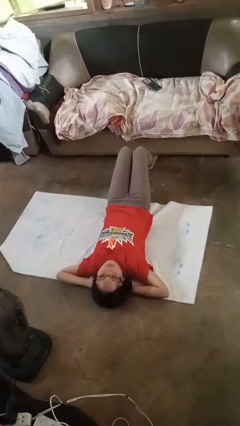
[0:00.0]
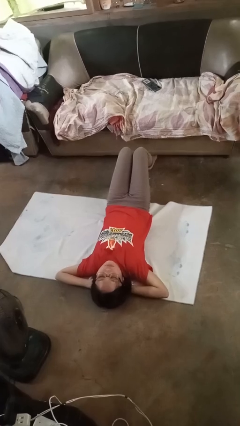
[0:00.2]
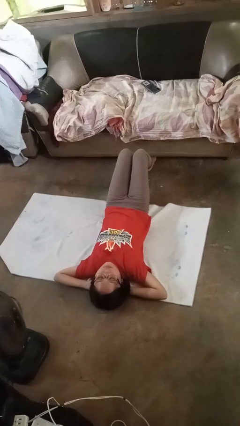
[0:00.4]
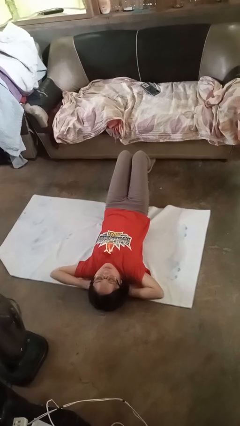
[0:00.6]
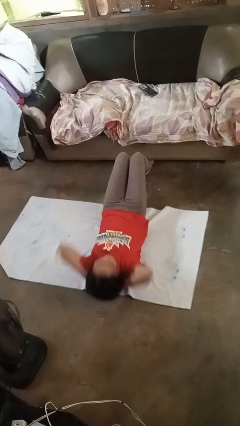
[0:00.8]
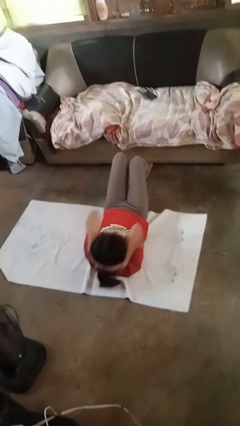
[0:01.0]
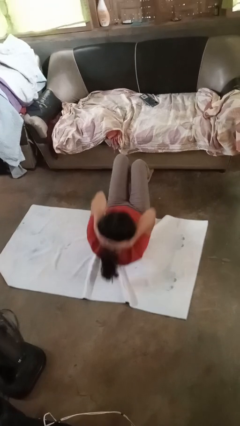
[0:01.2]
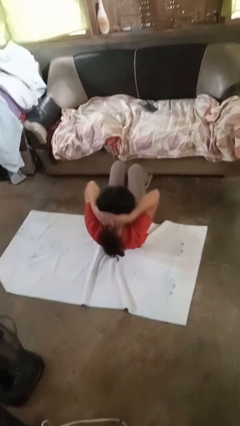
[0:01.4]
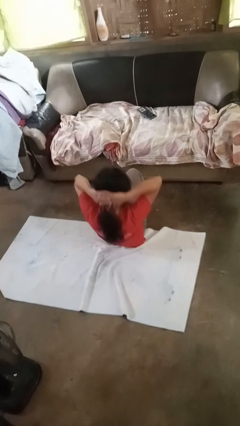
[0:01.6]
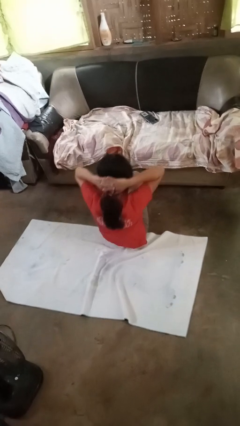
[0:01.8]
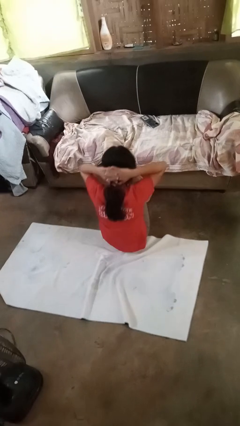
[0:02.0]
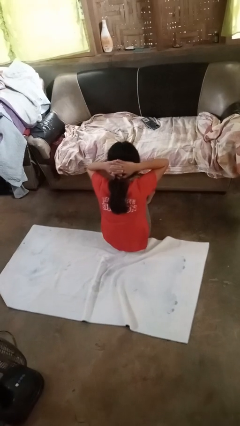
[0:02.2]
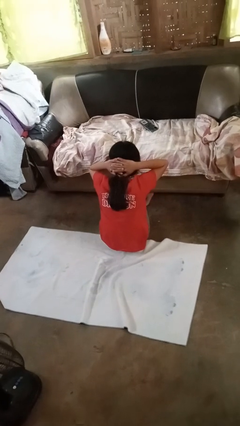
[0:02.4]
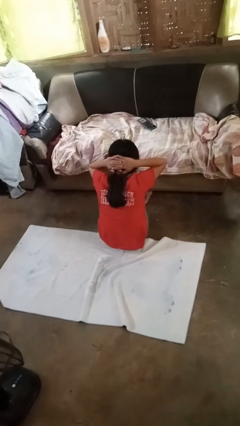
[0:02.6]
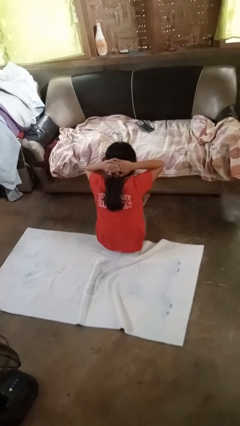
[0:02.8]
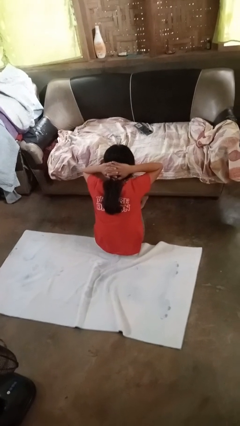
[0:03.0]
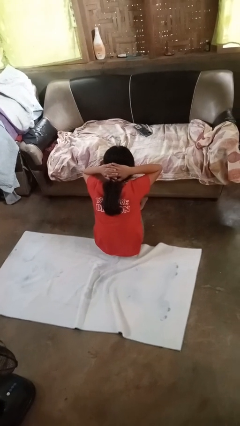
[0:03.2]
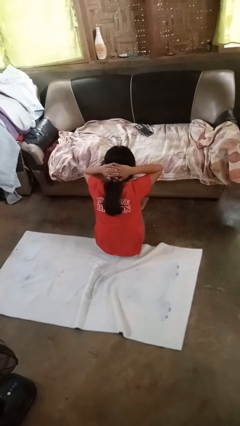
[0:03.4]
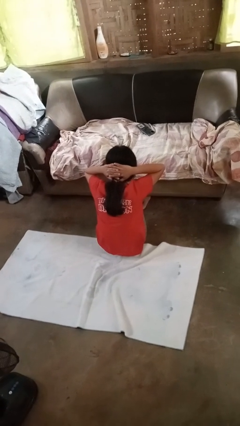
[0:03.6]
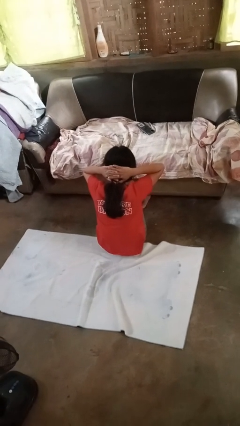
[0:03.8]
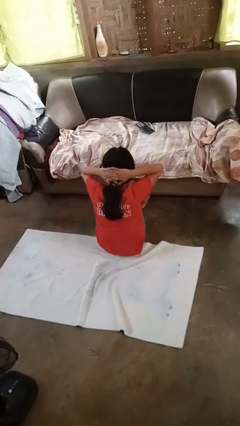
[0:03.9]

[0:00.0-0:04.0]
person exercises with situp

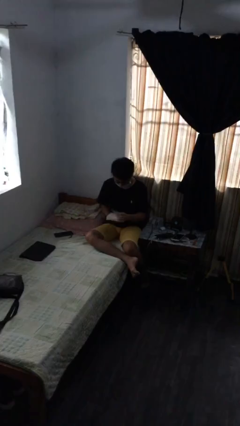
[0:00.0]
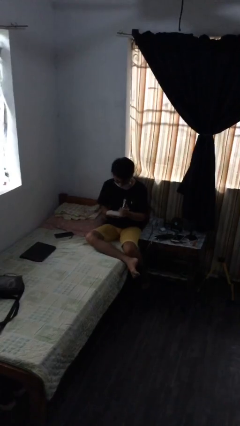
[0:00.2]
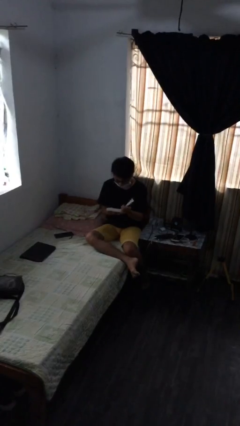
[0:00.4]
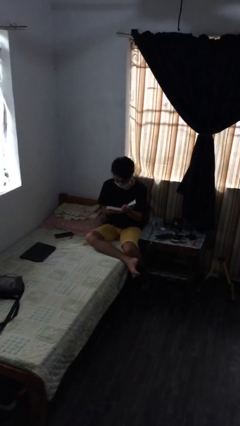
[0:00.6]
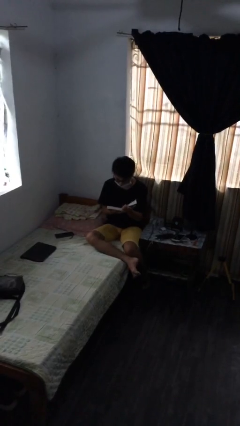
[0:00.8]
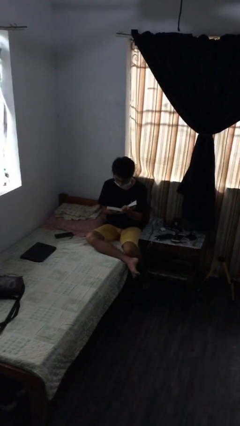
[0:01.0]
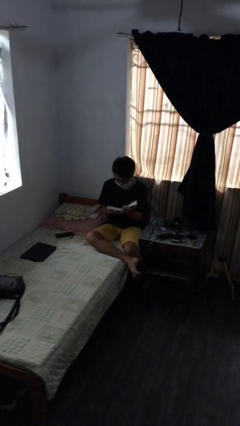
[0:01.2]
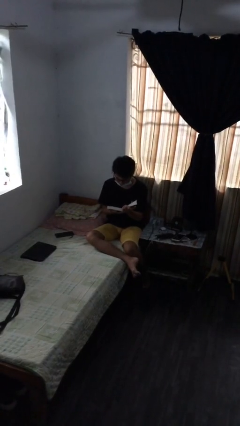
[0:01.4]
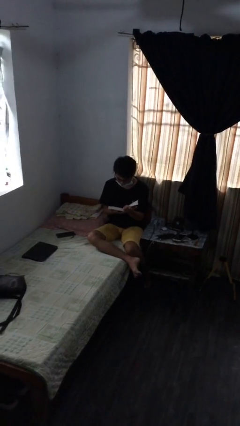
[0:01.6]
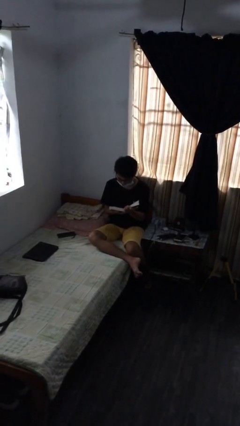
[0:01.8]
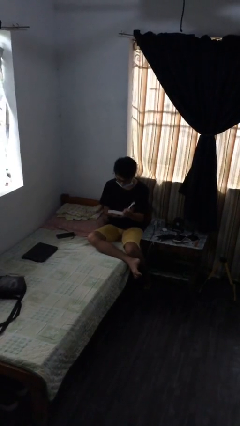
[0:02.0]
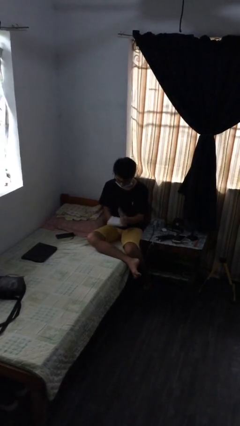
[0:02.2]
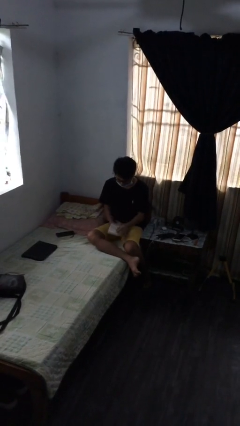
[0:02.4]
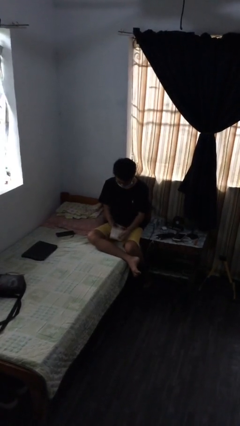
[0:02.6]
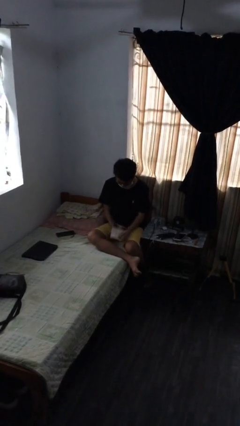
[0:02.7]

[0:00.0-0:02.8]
person reads document

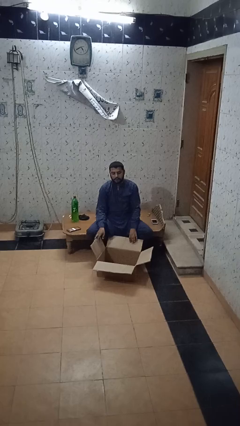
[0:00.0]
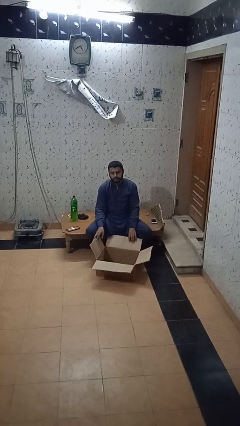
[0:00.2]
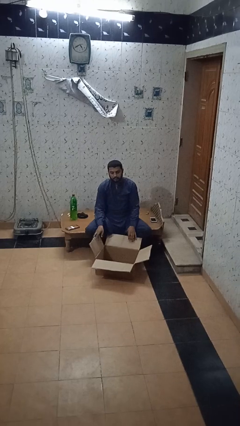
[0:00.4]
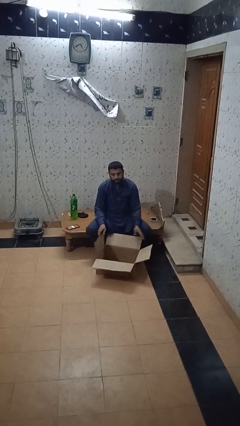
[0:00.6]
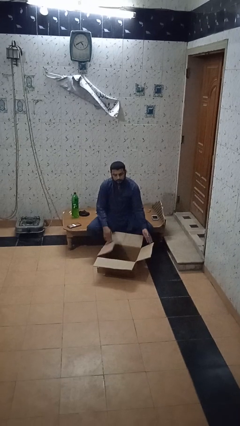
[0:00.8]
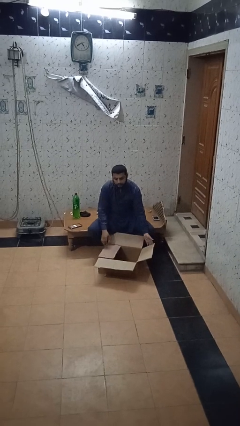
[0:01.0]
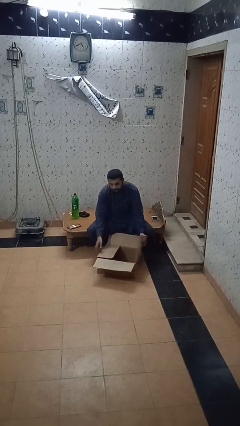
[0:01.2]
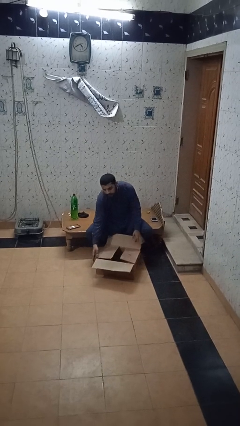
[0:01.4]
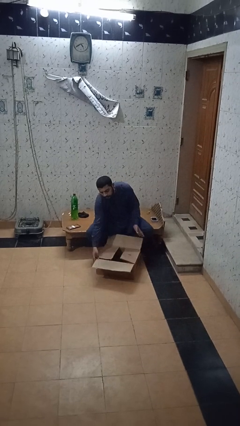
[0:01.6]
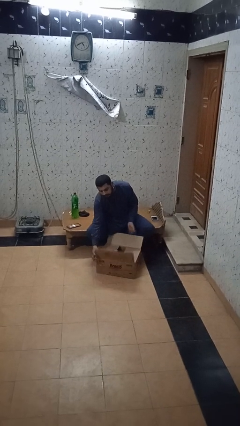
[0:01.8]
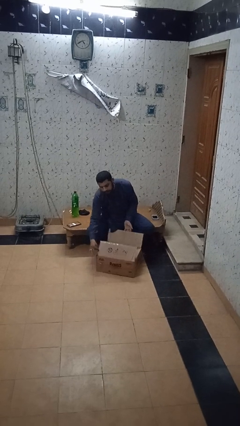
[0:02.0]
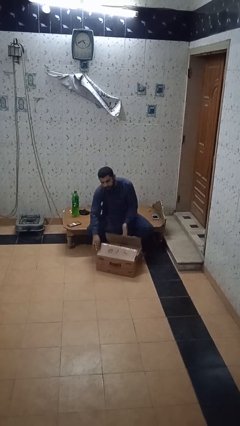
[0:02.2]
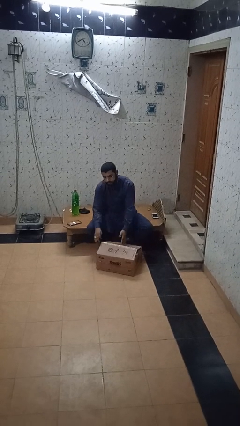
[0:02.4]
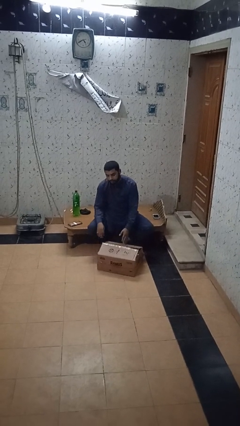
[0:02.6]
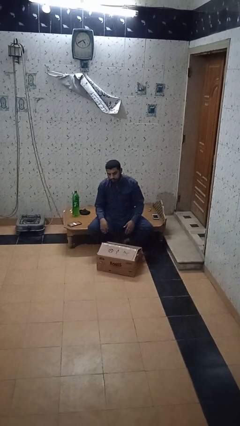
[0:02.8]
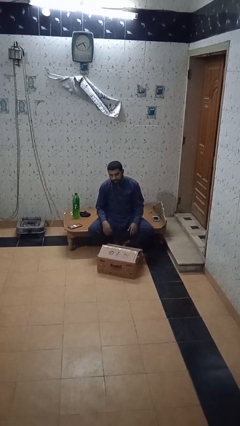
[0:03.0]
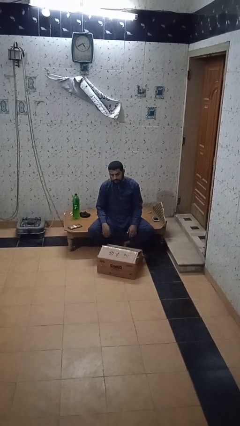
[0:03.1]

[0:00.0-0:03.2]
person closes box

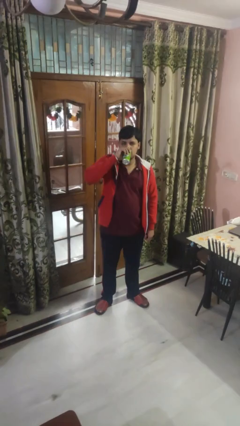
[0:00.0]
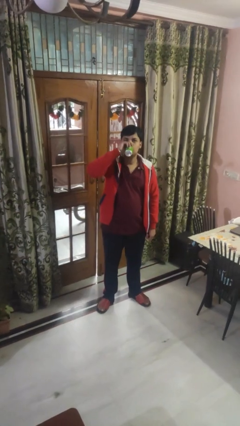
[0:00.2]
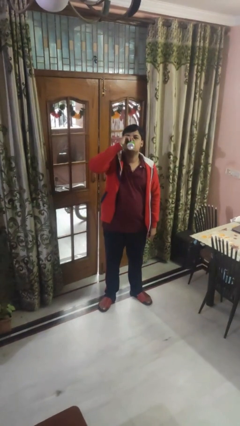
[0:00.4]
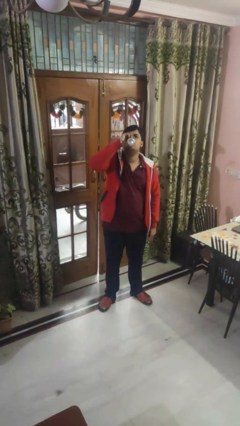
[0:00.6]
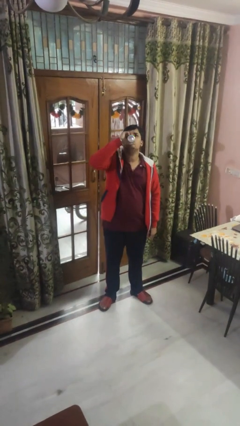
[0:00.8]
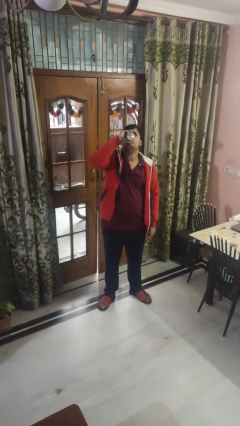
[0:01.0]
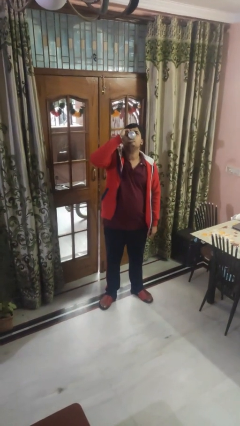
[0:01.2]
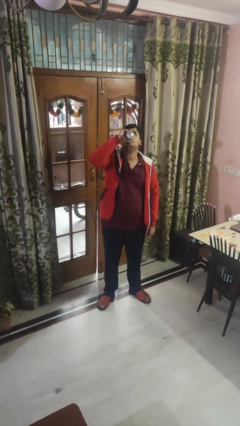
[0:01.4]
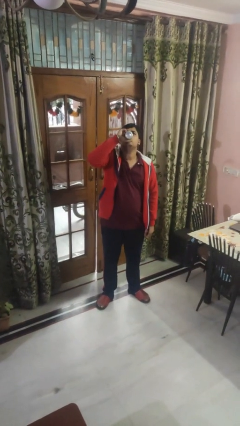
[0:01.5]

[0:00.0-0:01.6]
person drinks from beverage can

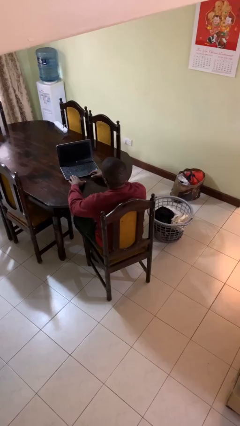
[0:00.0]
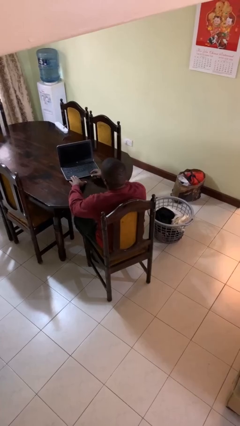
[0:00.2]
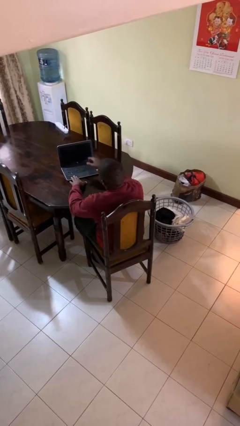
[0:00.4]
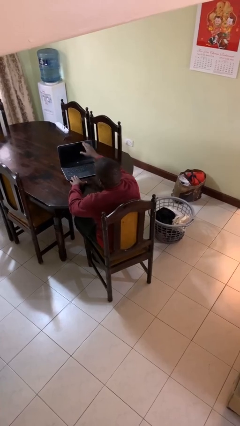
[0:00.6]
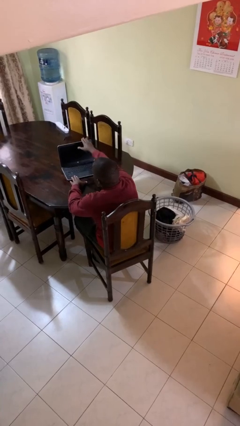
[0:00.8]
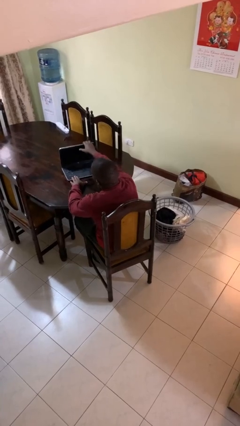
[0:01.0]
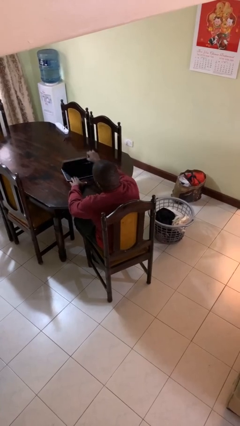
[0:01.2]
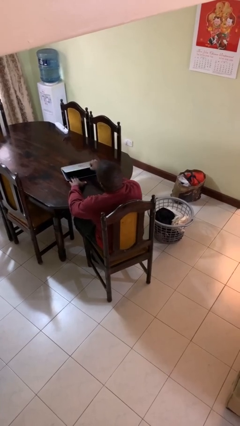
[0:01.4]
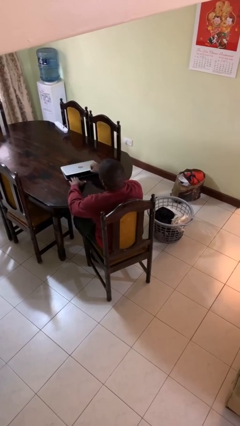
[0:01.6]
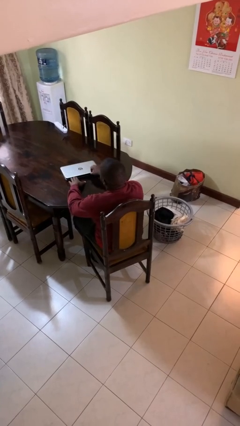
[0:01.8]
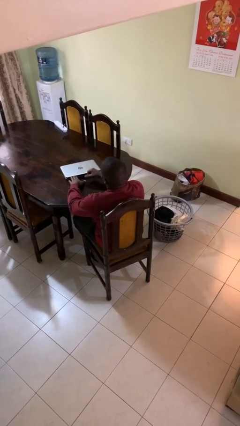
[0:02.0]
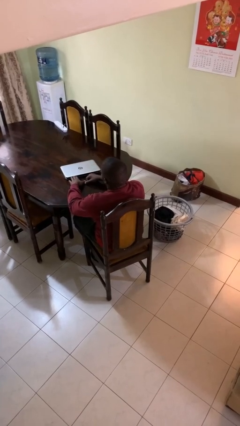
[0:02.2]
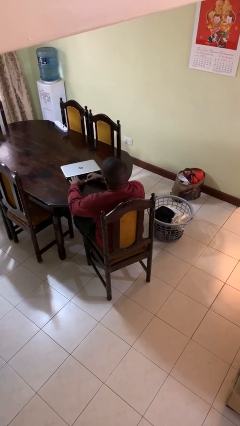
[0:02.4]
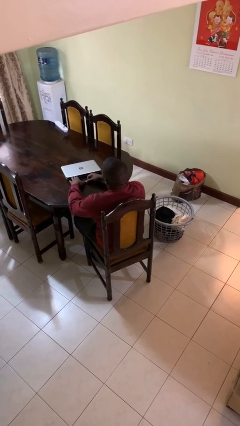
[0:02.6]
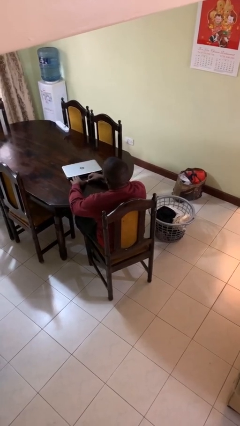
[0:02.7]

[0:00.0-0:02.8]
person closes laptop

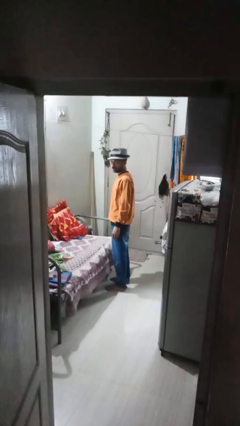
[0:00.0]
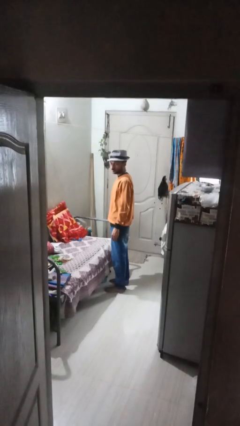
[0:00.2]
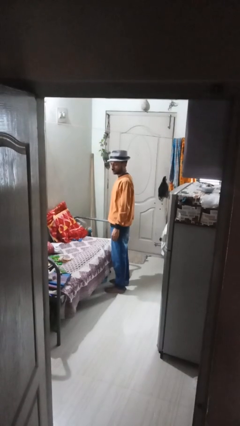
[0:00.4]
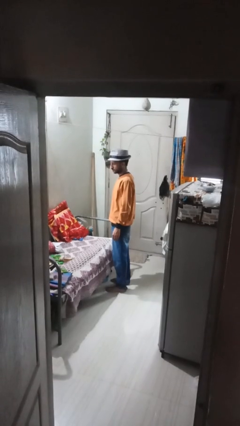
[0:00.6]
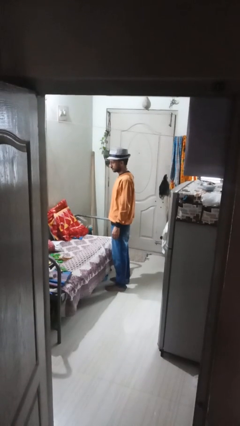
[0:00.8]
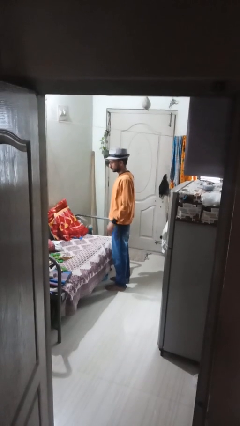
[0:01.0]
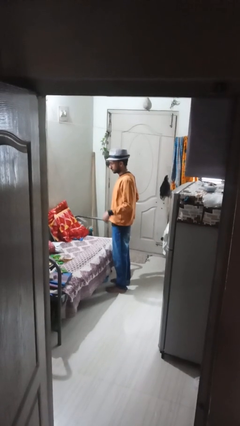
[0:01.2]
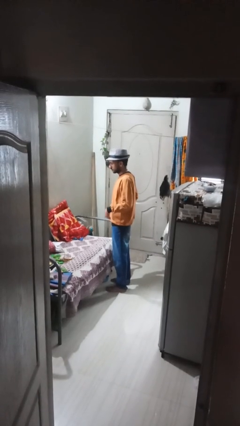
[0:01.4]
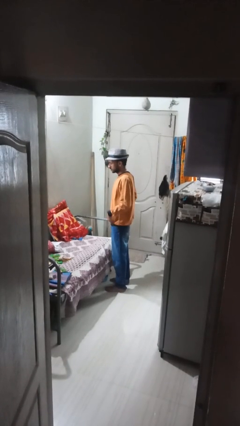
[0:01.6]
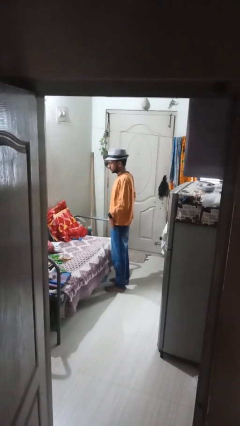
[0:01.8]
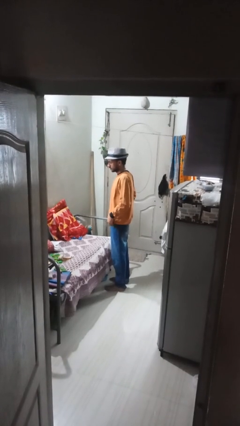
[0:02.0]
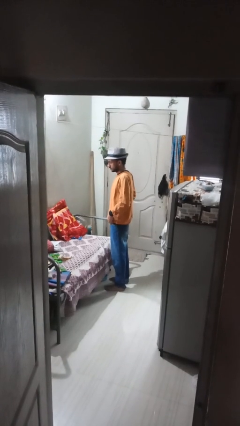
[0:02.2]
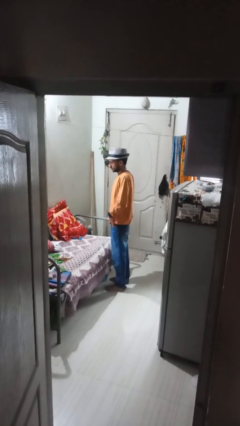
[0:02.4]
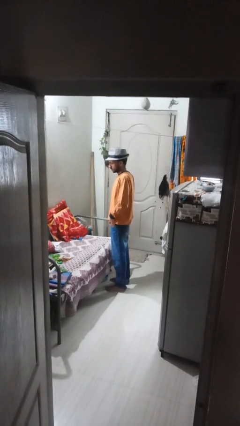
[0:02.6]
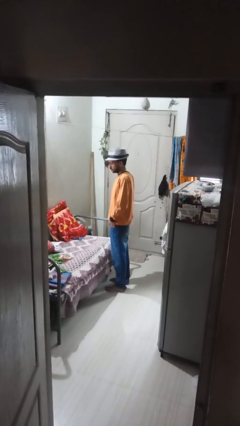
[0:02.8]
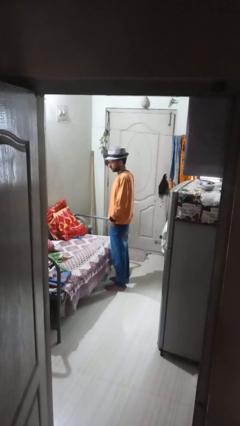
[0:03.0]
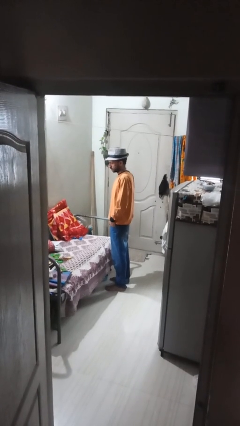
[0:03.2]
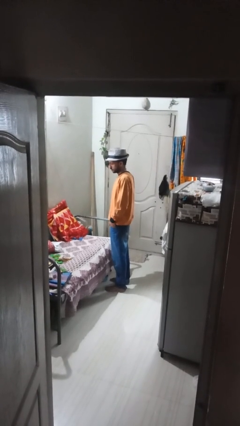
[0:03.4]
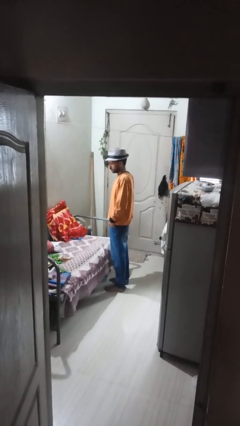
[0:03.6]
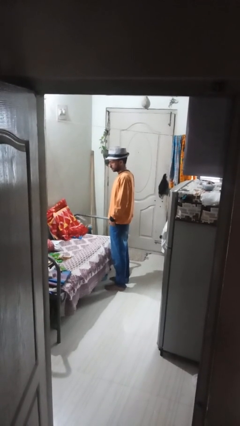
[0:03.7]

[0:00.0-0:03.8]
person puts hands in back pockets
